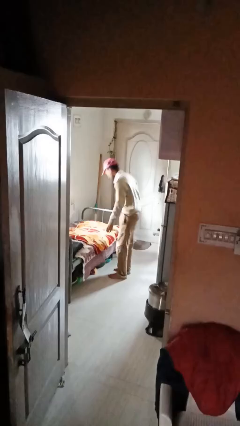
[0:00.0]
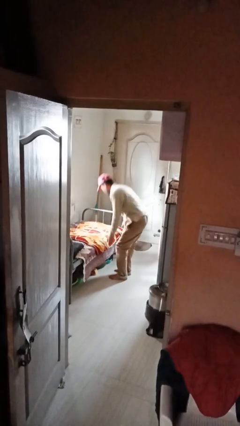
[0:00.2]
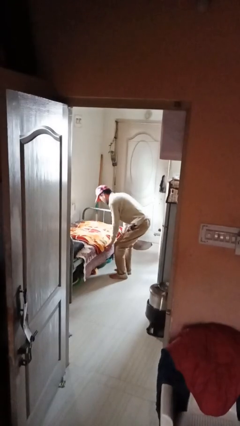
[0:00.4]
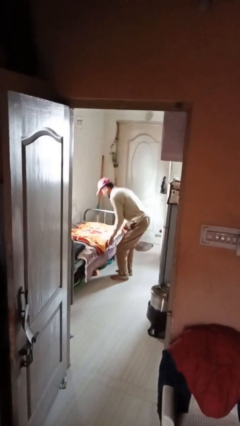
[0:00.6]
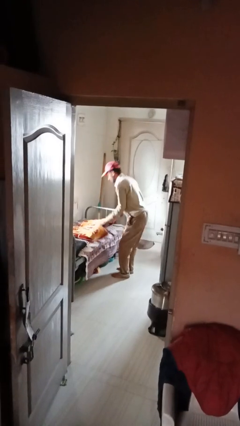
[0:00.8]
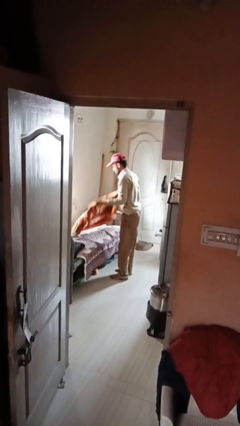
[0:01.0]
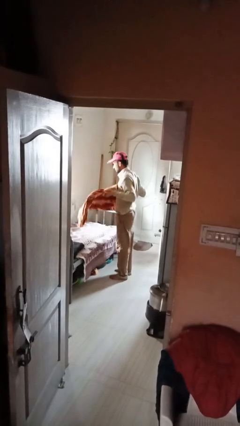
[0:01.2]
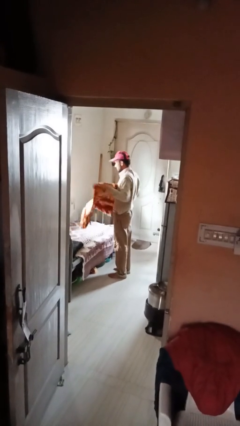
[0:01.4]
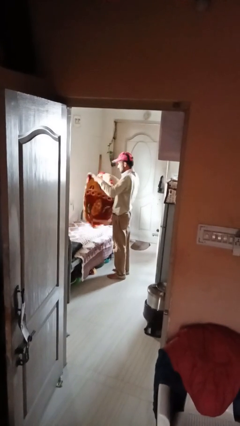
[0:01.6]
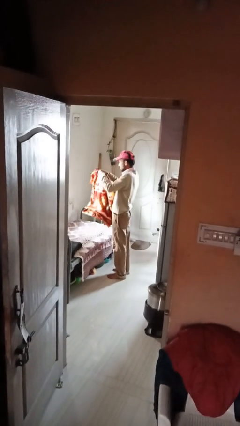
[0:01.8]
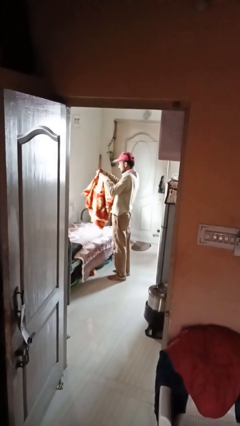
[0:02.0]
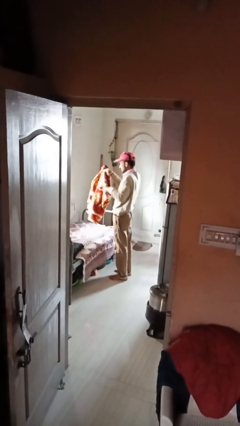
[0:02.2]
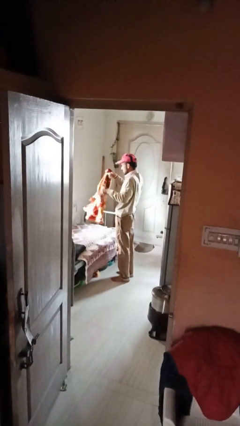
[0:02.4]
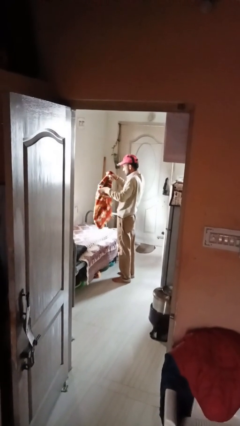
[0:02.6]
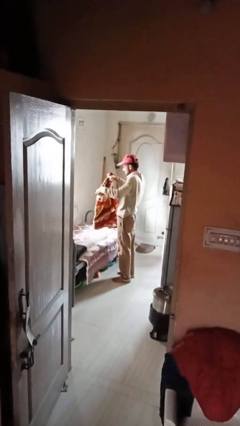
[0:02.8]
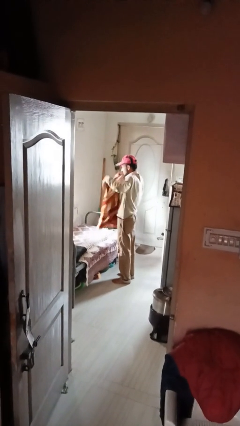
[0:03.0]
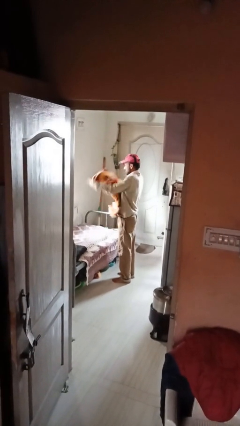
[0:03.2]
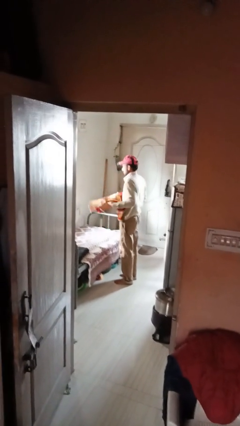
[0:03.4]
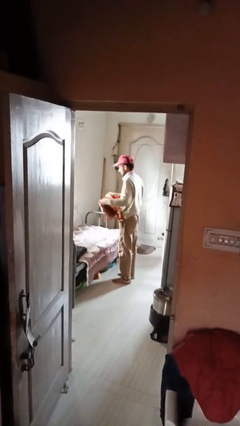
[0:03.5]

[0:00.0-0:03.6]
person folds blanket

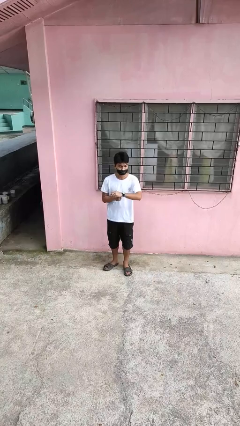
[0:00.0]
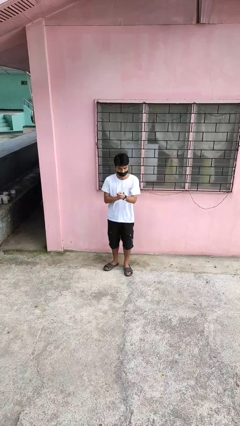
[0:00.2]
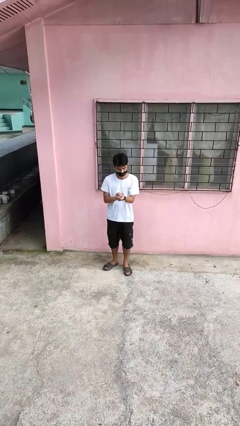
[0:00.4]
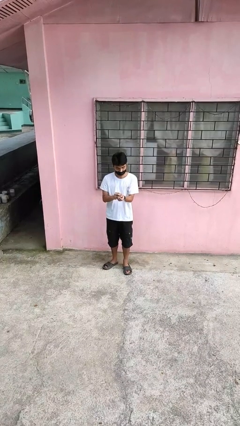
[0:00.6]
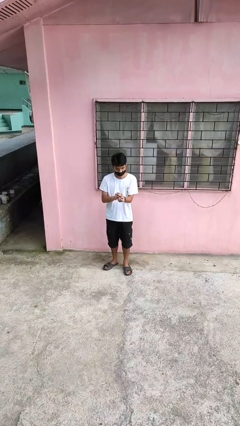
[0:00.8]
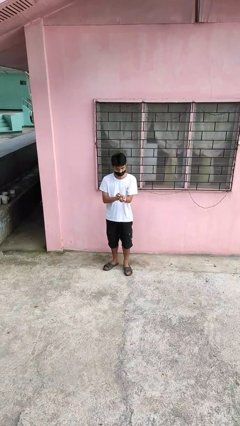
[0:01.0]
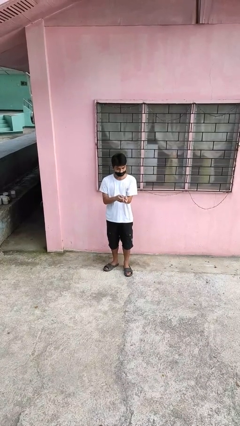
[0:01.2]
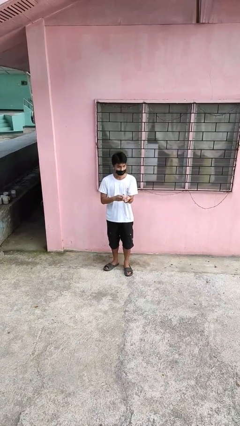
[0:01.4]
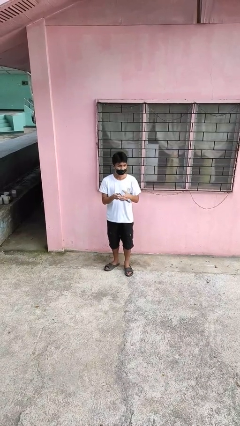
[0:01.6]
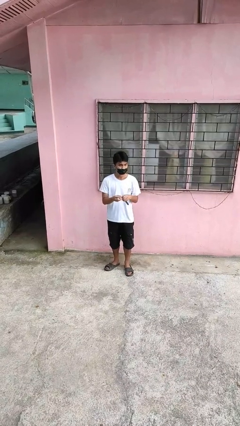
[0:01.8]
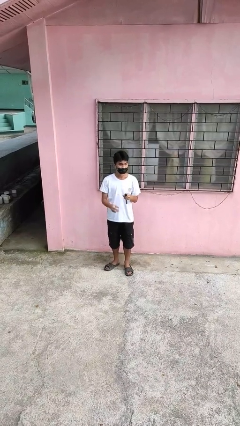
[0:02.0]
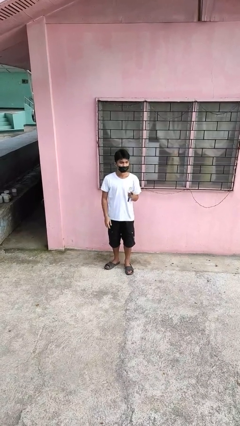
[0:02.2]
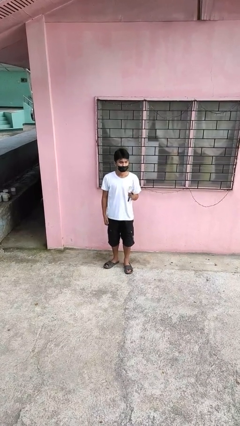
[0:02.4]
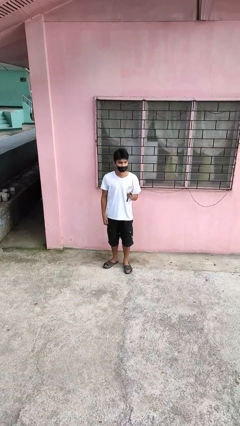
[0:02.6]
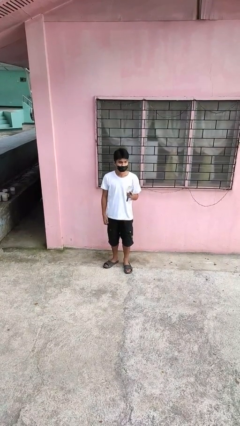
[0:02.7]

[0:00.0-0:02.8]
person takes off wristwatch

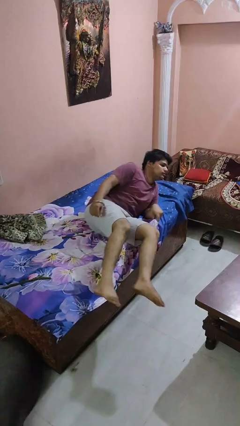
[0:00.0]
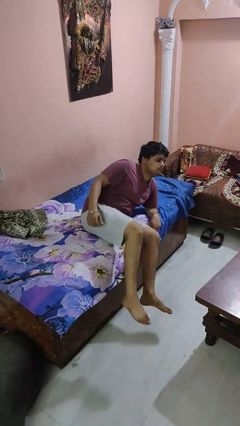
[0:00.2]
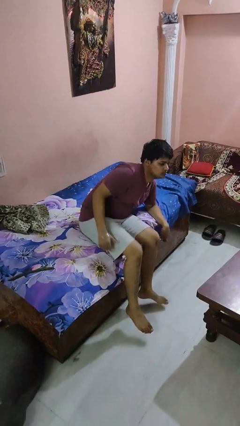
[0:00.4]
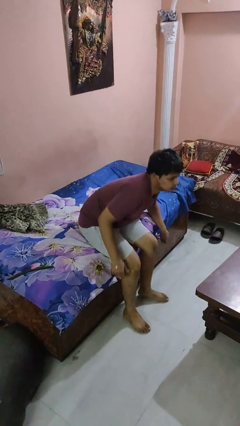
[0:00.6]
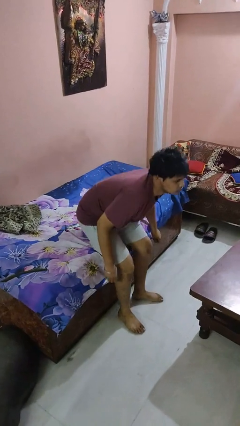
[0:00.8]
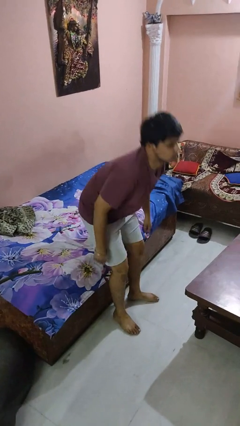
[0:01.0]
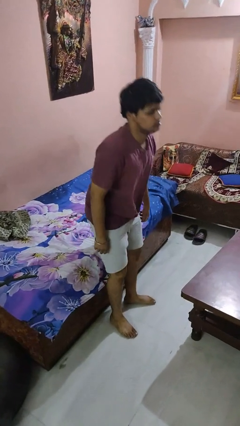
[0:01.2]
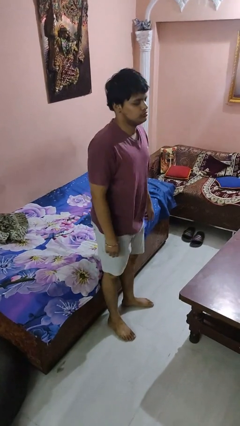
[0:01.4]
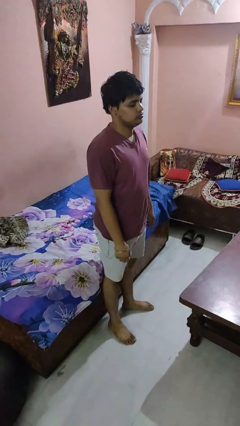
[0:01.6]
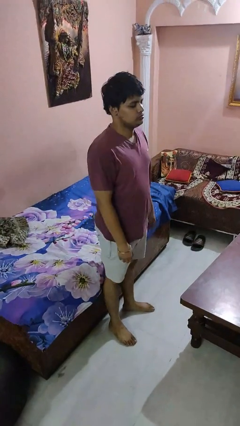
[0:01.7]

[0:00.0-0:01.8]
person stands up

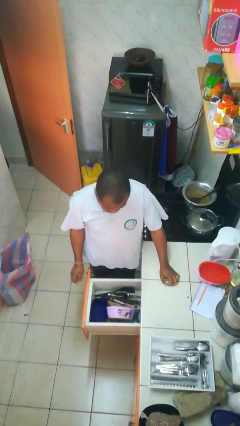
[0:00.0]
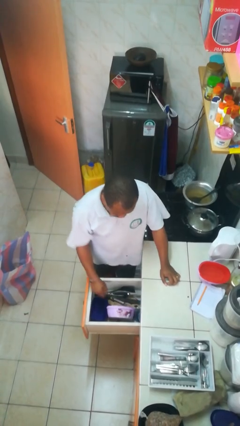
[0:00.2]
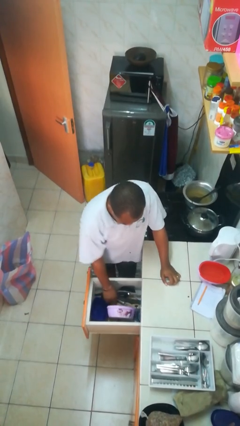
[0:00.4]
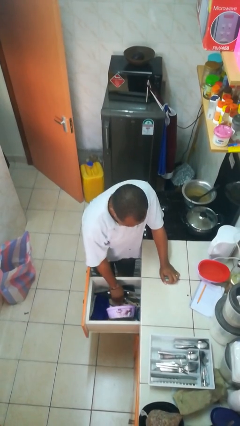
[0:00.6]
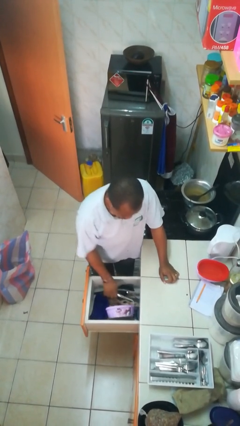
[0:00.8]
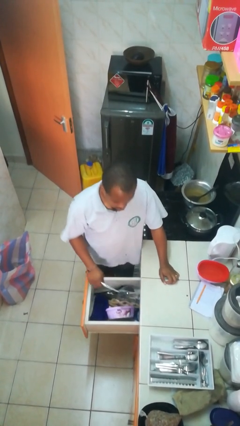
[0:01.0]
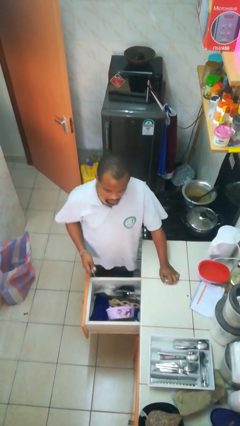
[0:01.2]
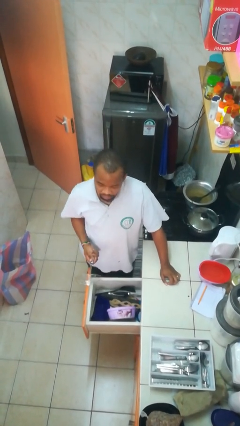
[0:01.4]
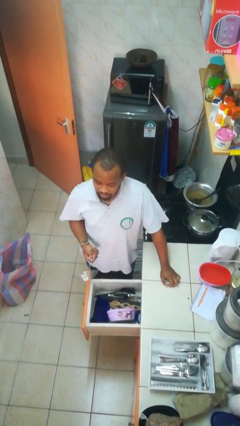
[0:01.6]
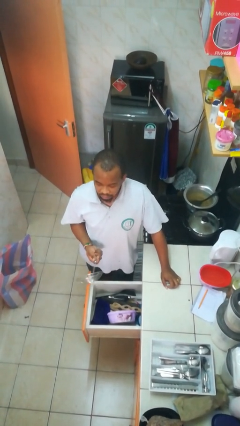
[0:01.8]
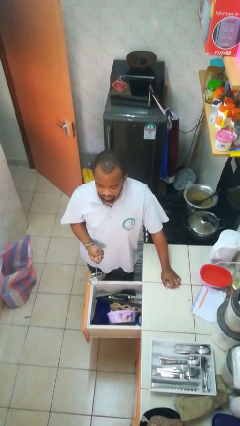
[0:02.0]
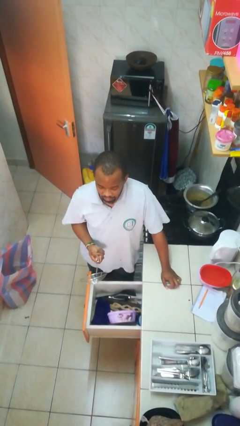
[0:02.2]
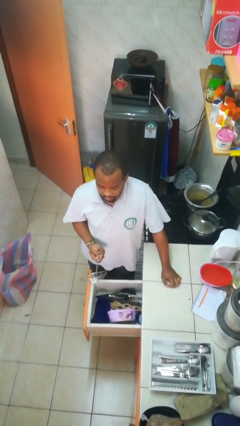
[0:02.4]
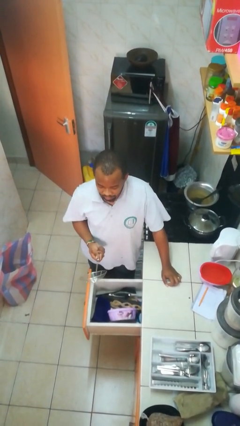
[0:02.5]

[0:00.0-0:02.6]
person takes object from kitchen drawer

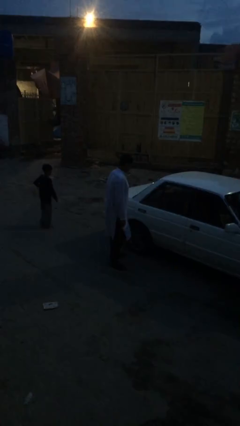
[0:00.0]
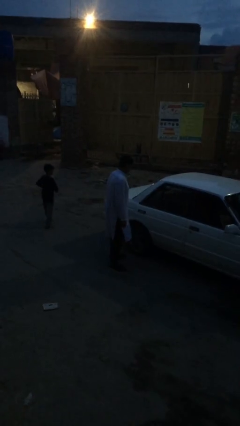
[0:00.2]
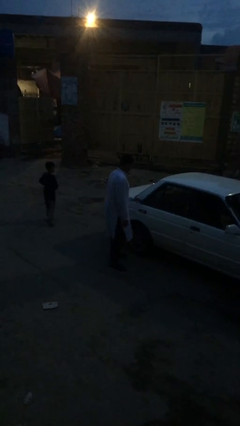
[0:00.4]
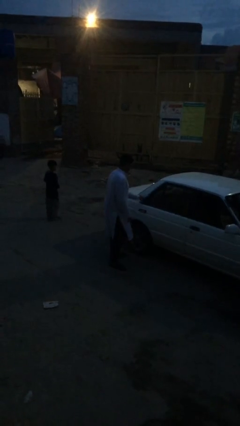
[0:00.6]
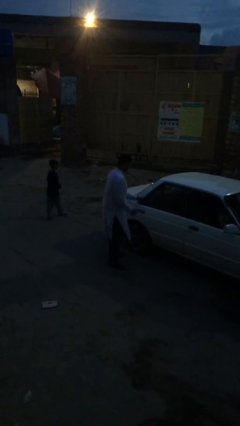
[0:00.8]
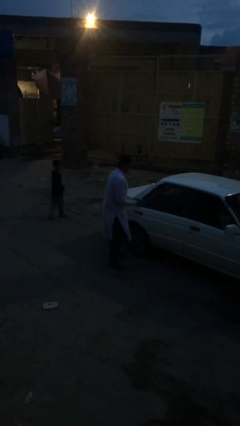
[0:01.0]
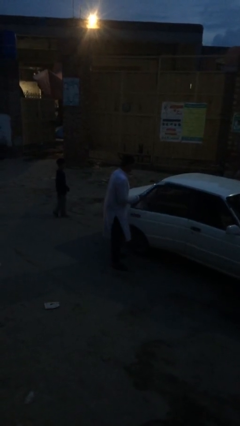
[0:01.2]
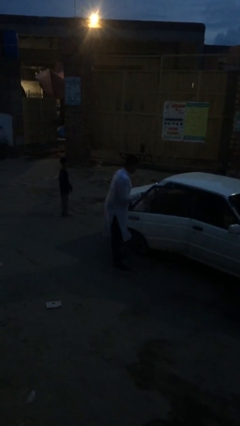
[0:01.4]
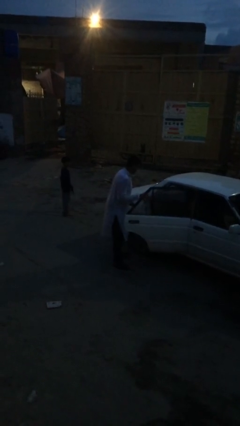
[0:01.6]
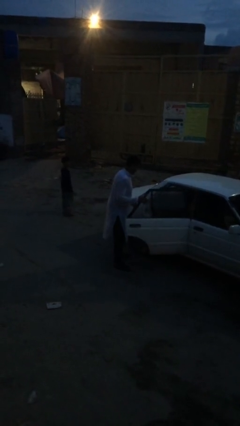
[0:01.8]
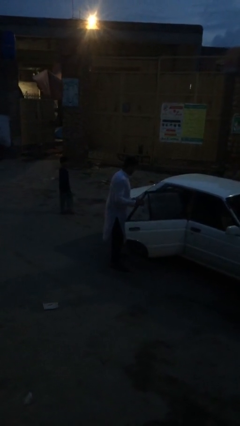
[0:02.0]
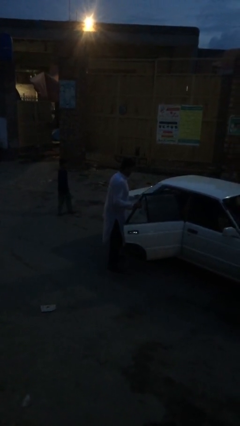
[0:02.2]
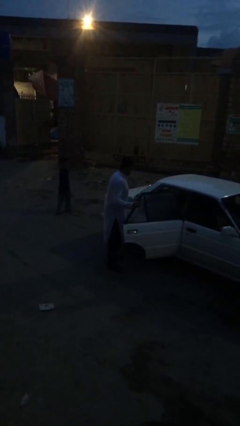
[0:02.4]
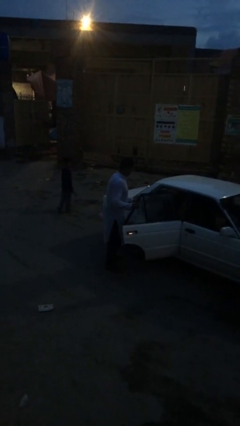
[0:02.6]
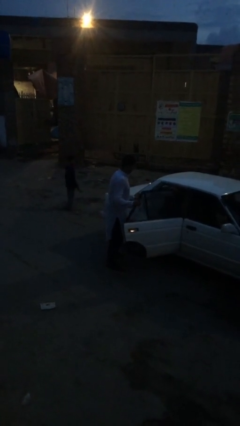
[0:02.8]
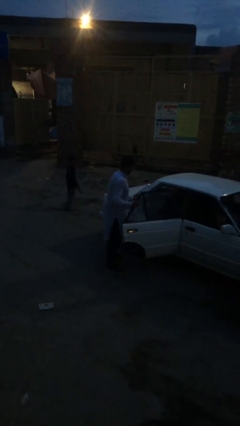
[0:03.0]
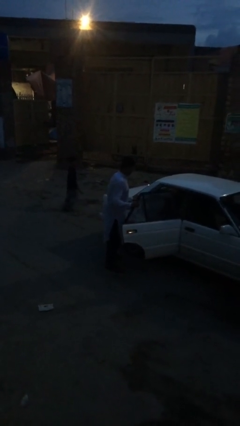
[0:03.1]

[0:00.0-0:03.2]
person opens car door

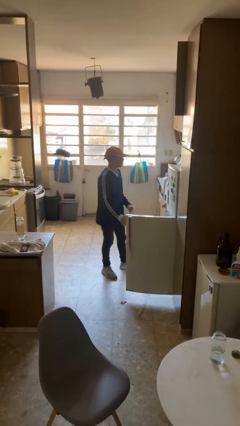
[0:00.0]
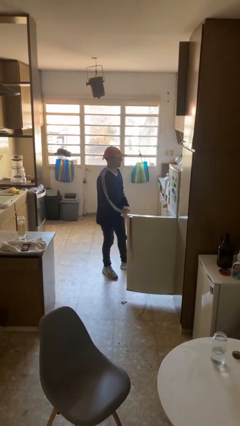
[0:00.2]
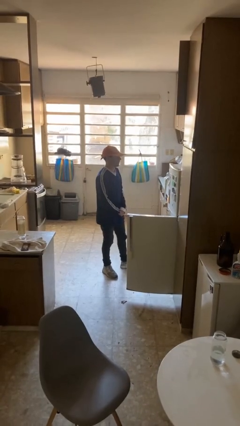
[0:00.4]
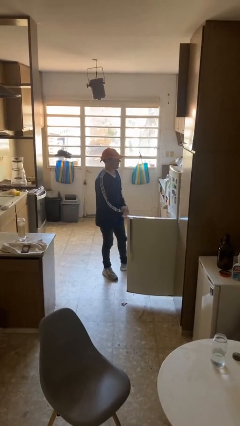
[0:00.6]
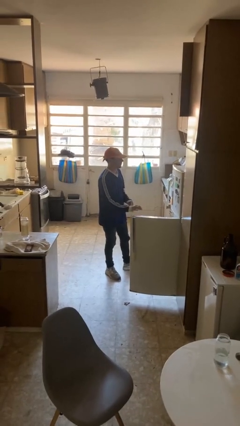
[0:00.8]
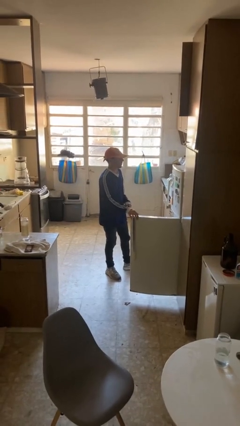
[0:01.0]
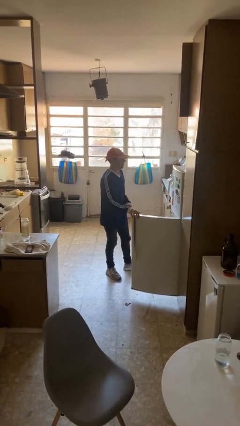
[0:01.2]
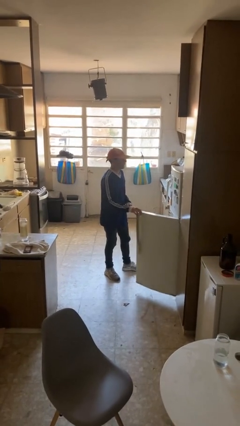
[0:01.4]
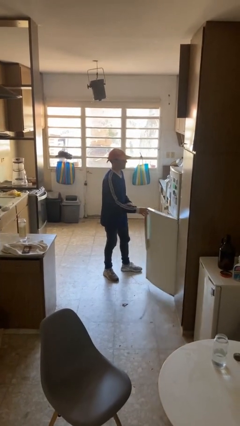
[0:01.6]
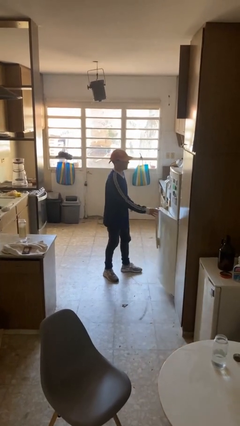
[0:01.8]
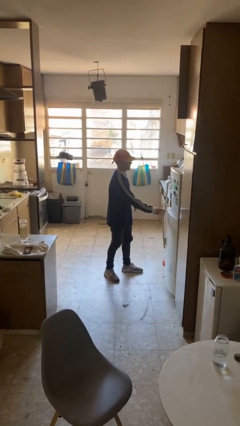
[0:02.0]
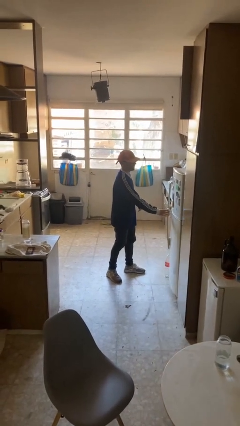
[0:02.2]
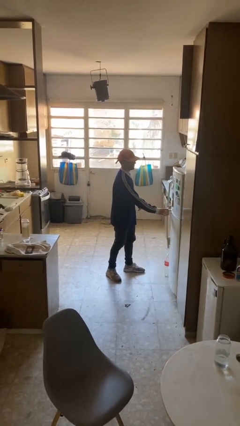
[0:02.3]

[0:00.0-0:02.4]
person closes refrigerator

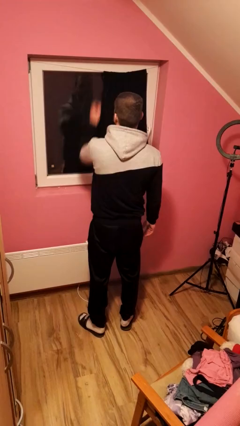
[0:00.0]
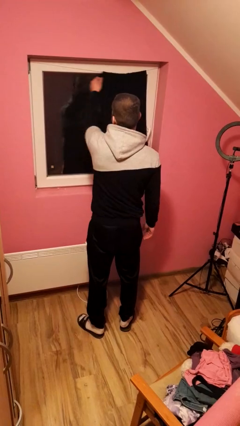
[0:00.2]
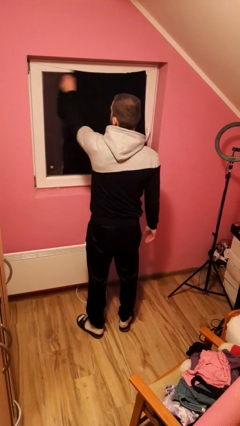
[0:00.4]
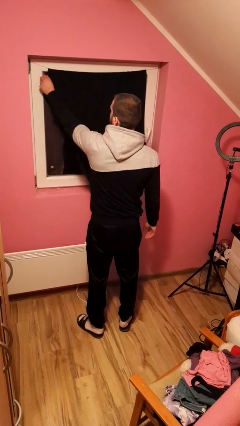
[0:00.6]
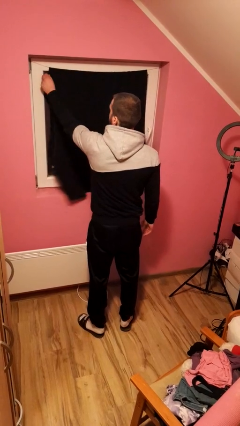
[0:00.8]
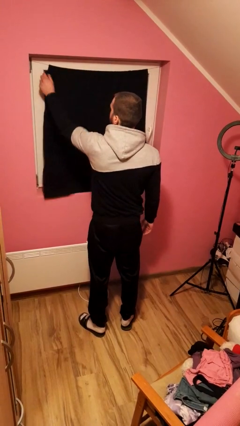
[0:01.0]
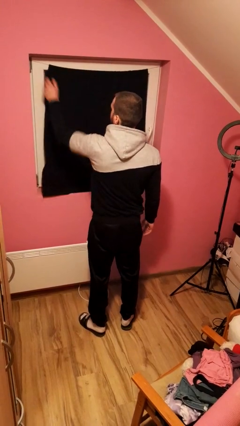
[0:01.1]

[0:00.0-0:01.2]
person closes curtains
